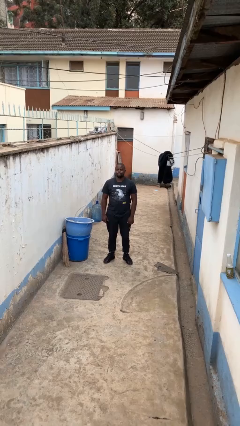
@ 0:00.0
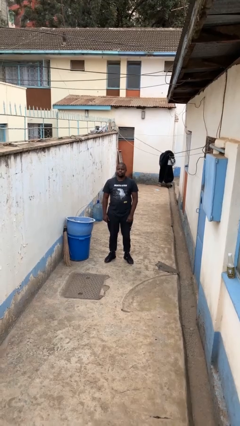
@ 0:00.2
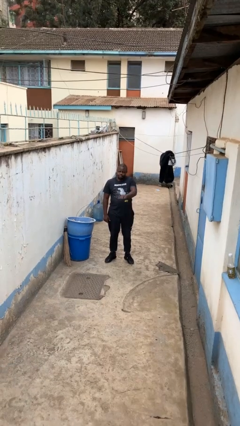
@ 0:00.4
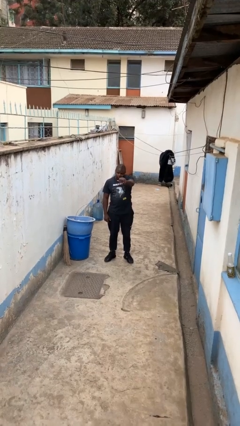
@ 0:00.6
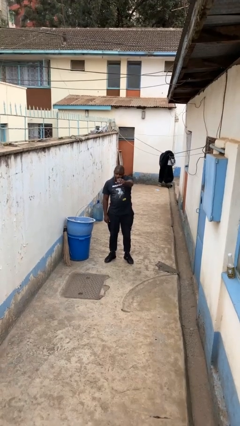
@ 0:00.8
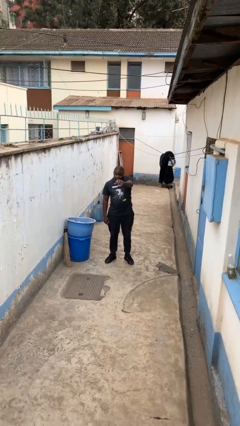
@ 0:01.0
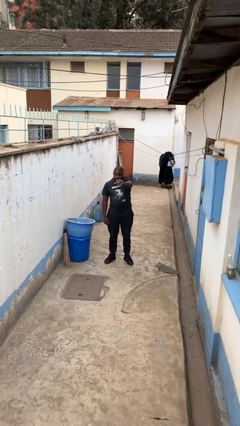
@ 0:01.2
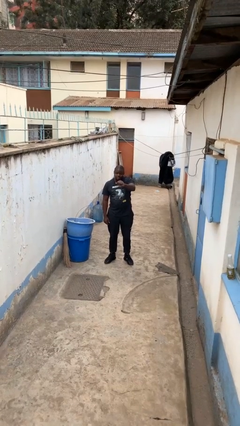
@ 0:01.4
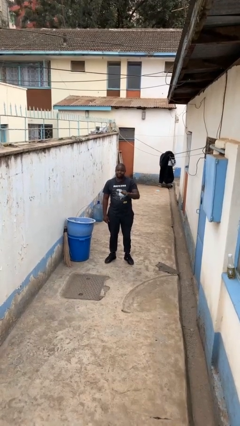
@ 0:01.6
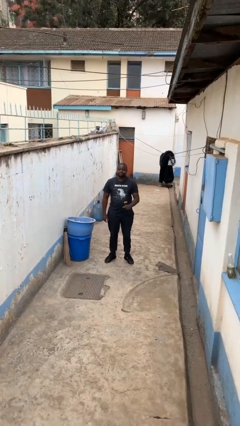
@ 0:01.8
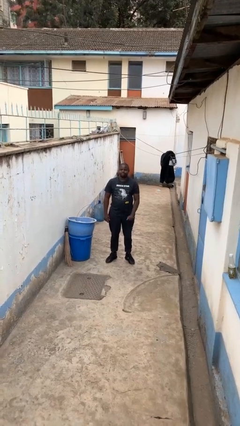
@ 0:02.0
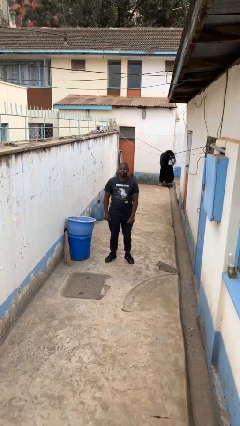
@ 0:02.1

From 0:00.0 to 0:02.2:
person gestures come here

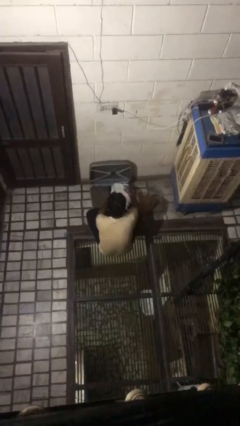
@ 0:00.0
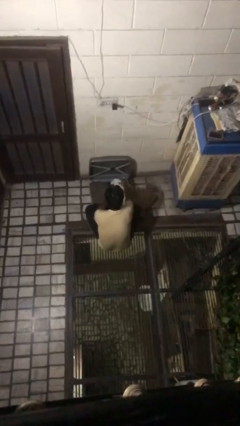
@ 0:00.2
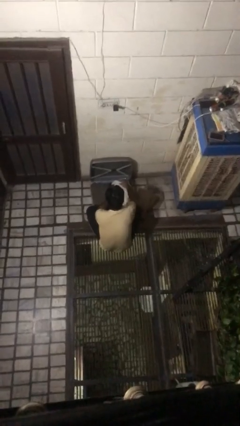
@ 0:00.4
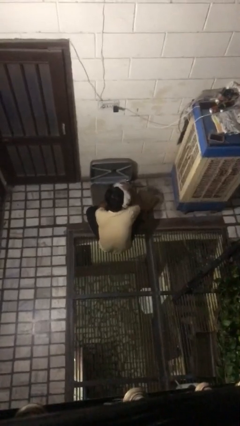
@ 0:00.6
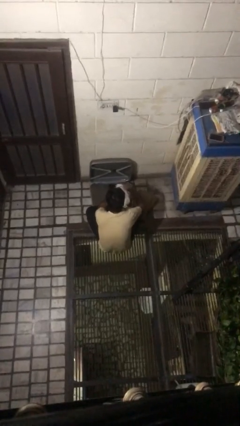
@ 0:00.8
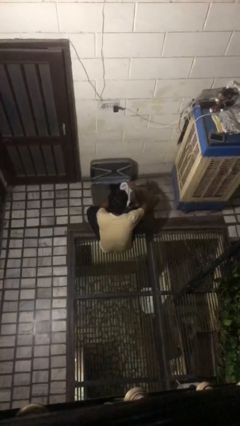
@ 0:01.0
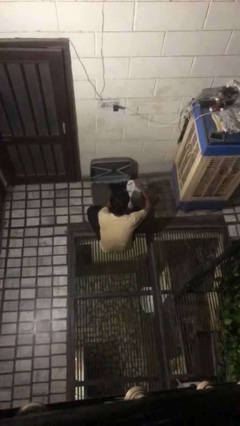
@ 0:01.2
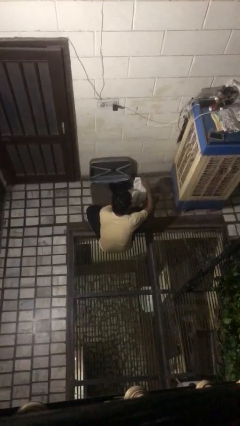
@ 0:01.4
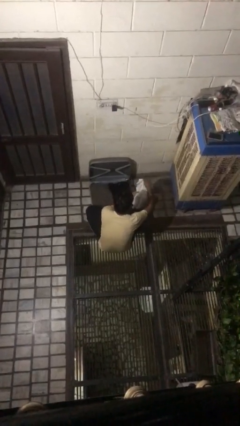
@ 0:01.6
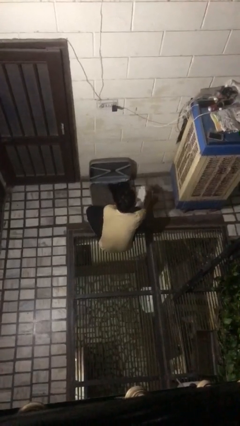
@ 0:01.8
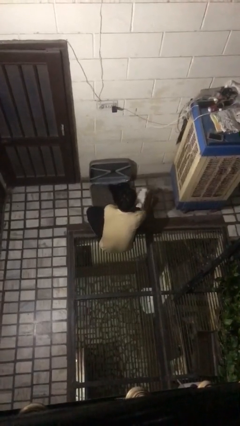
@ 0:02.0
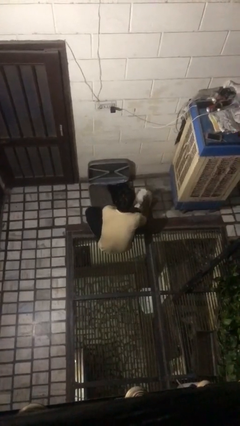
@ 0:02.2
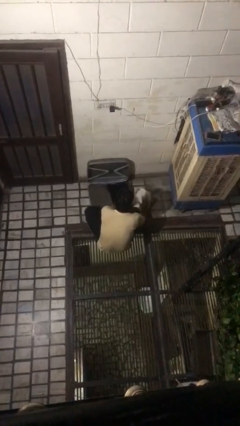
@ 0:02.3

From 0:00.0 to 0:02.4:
person unloads clothes from suitcase

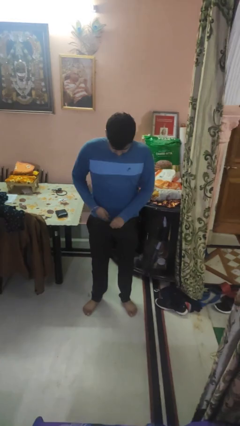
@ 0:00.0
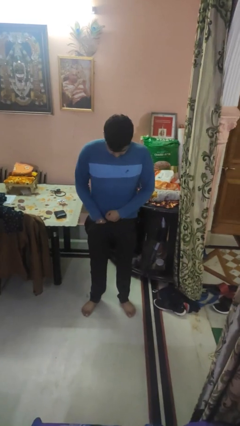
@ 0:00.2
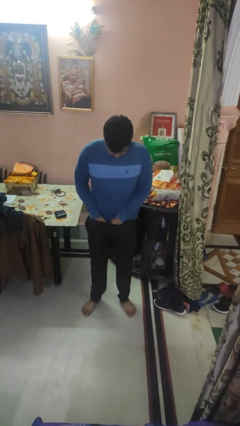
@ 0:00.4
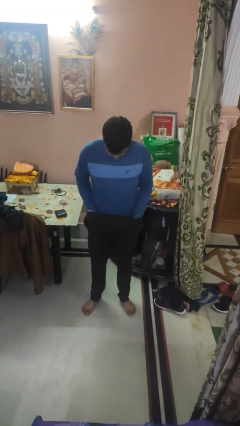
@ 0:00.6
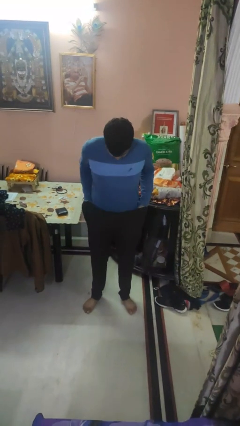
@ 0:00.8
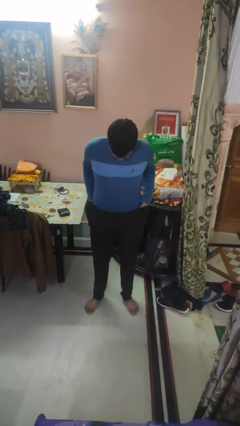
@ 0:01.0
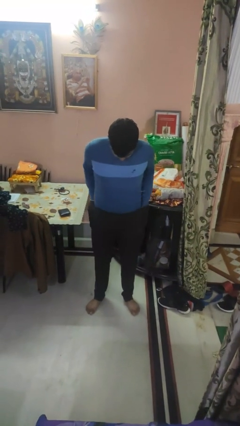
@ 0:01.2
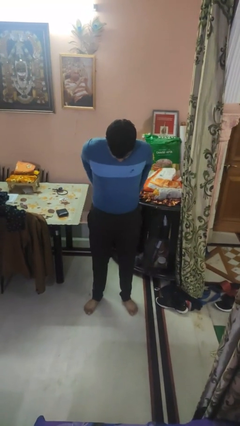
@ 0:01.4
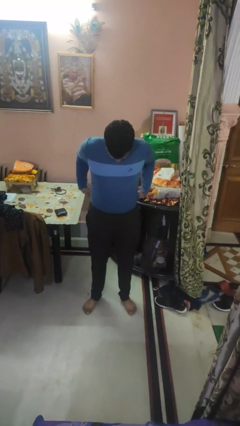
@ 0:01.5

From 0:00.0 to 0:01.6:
person tucks in shirt

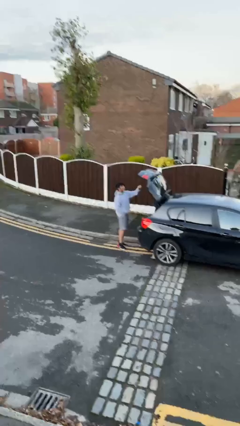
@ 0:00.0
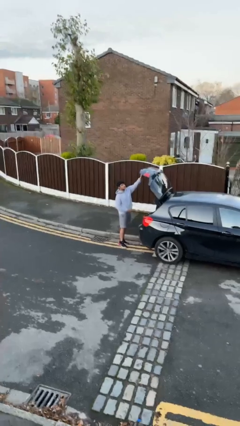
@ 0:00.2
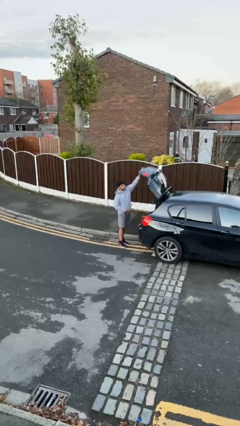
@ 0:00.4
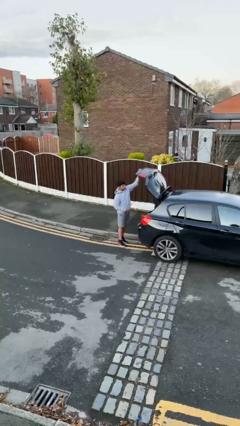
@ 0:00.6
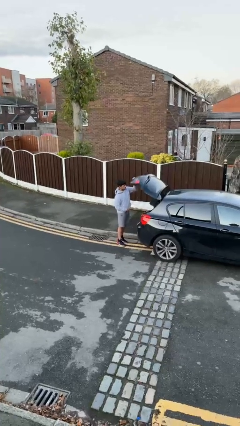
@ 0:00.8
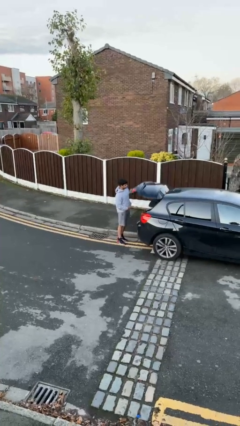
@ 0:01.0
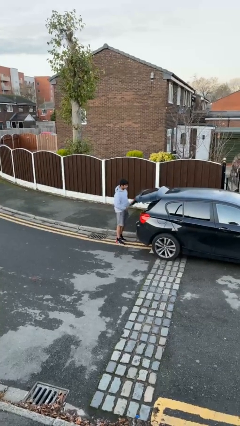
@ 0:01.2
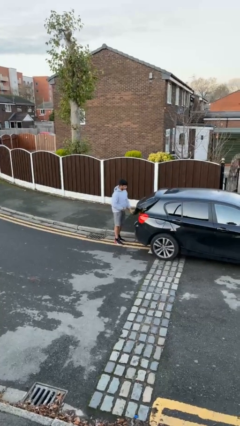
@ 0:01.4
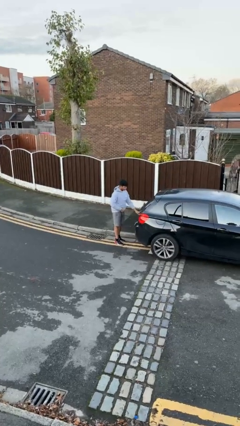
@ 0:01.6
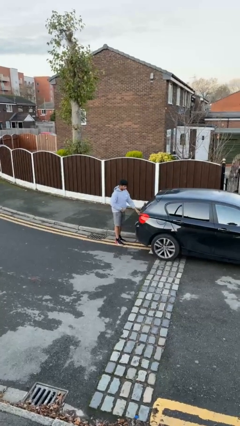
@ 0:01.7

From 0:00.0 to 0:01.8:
person closes car trunk

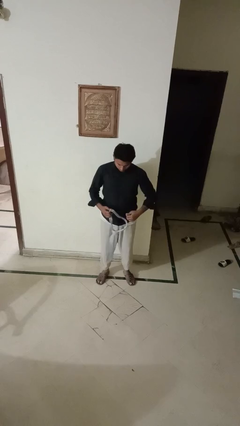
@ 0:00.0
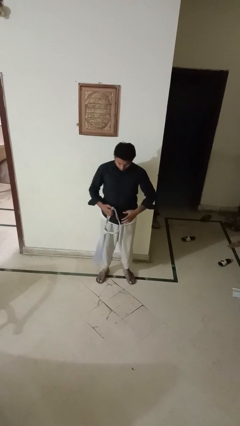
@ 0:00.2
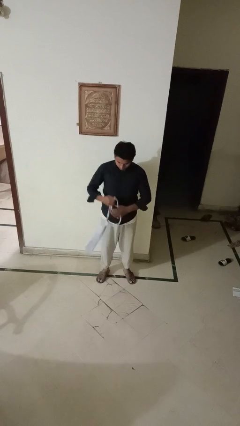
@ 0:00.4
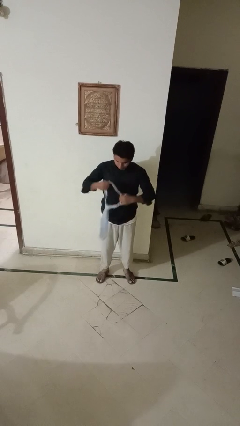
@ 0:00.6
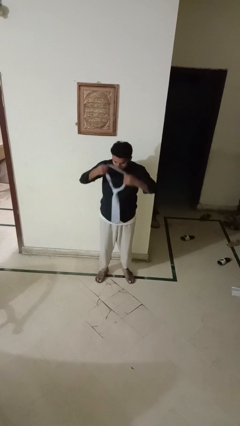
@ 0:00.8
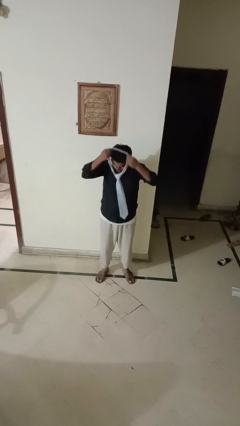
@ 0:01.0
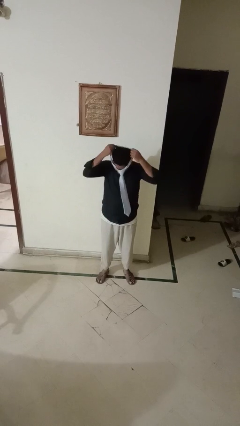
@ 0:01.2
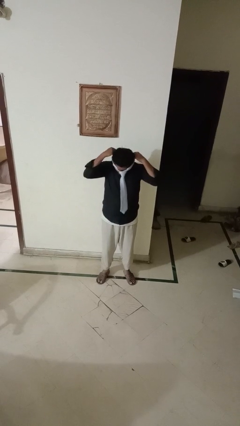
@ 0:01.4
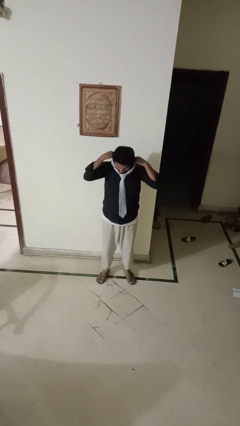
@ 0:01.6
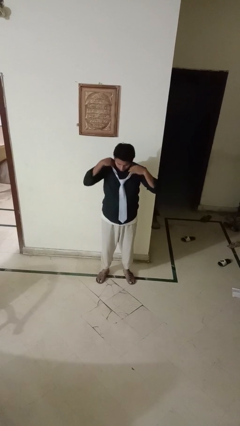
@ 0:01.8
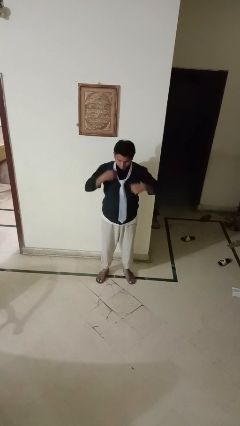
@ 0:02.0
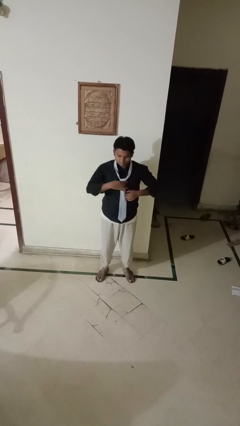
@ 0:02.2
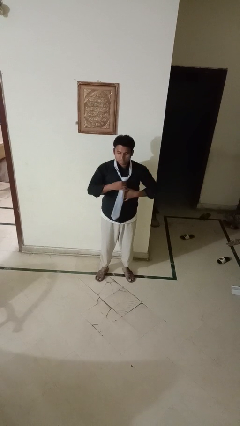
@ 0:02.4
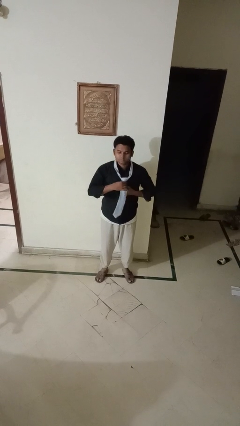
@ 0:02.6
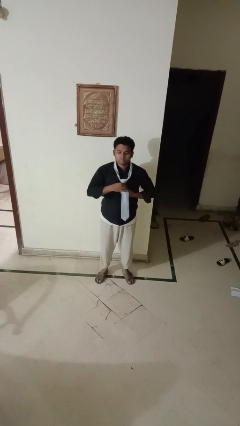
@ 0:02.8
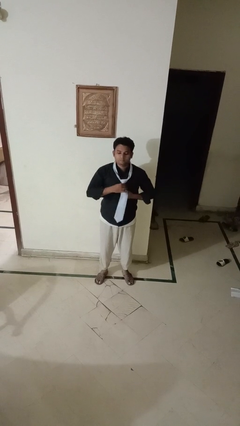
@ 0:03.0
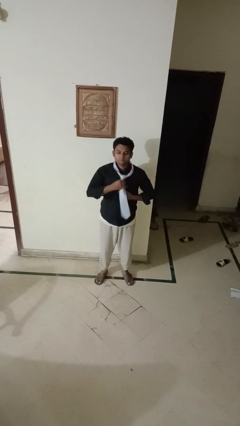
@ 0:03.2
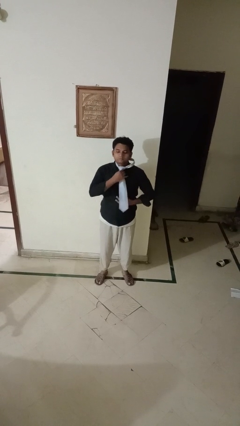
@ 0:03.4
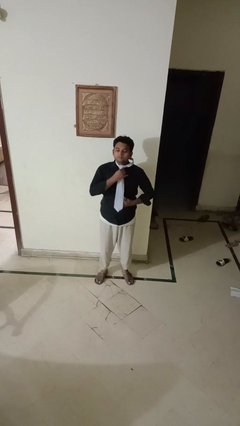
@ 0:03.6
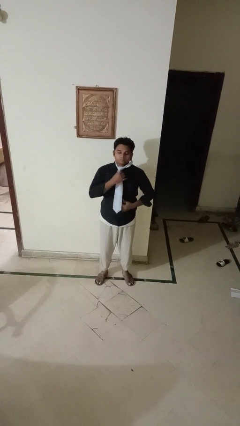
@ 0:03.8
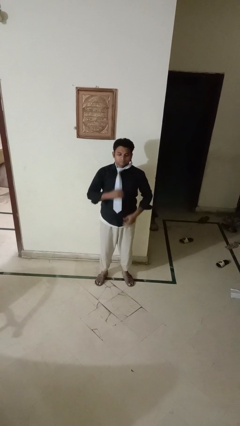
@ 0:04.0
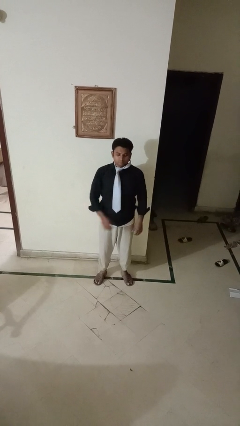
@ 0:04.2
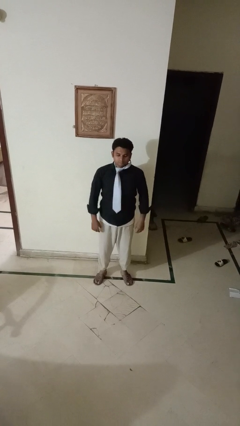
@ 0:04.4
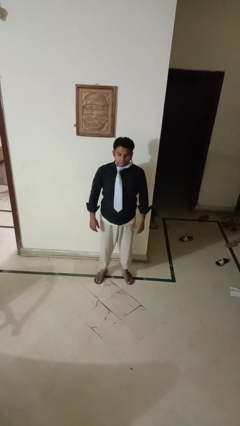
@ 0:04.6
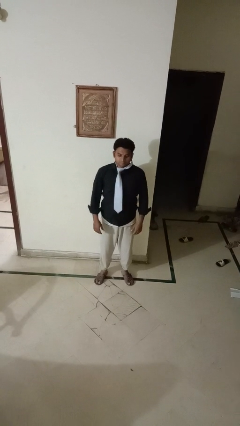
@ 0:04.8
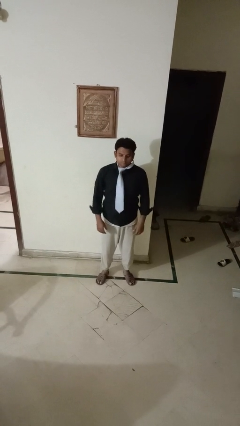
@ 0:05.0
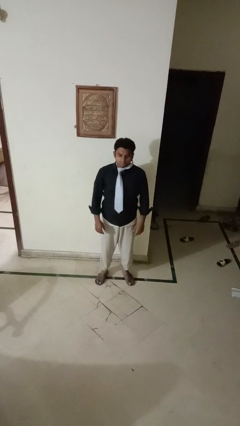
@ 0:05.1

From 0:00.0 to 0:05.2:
person puts on necktie

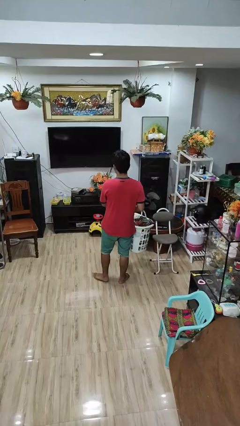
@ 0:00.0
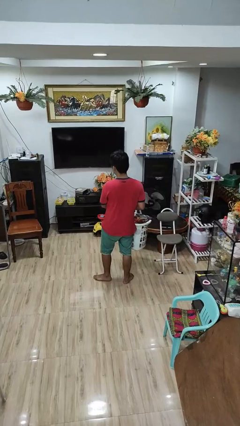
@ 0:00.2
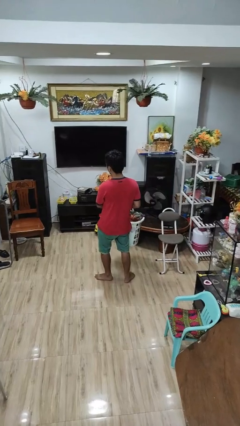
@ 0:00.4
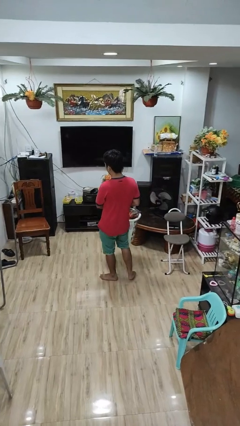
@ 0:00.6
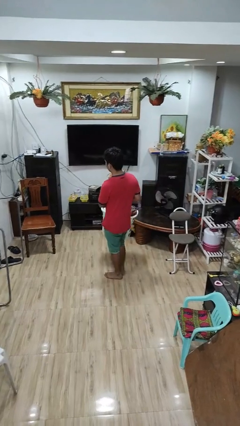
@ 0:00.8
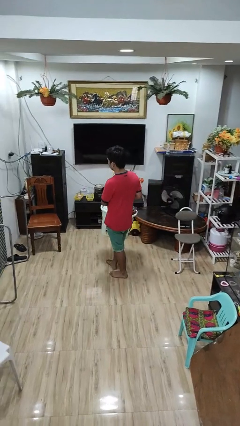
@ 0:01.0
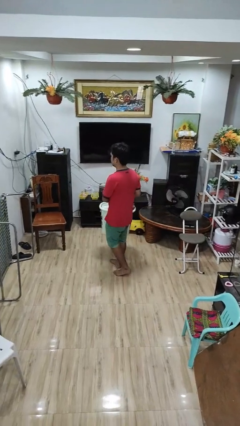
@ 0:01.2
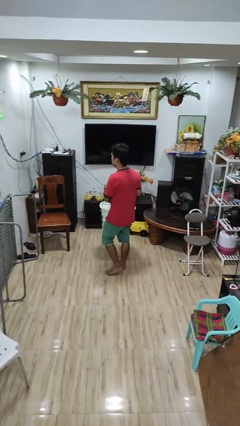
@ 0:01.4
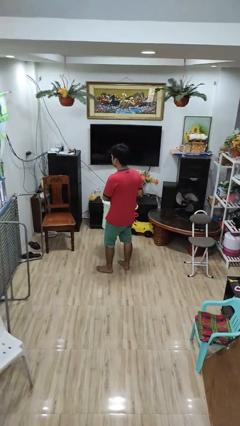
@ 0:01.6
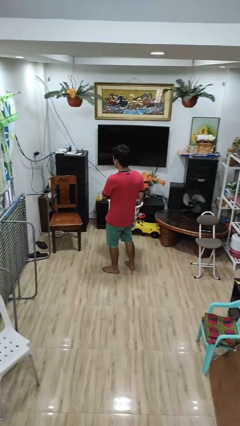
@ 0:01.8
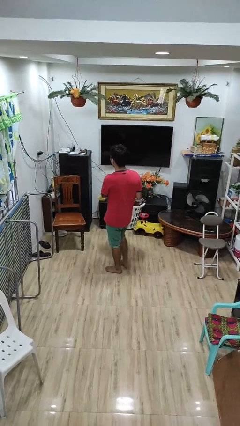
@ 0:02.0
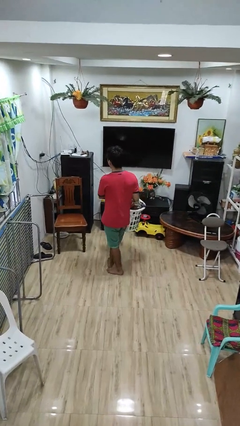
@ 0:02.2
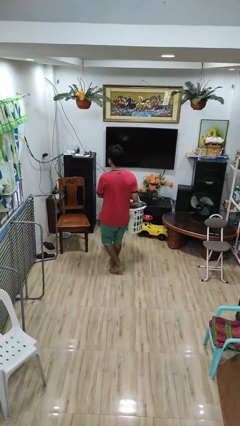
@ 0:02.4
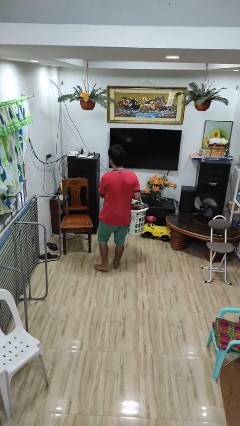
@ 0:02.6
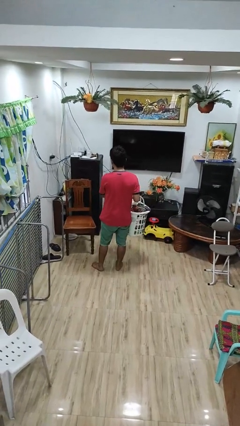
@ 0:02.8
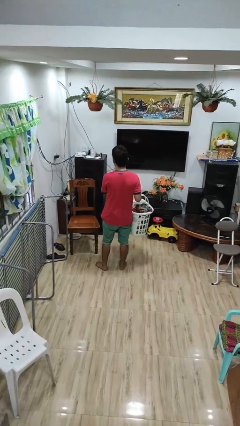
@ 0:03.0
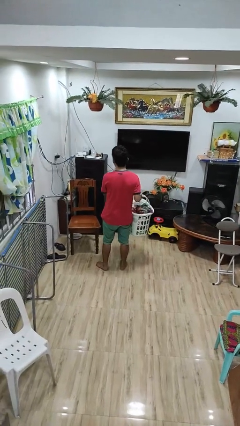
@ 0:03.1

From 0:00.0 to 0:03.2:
person carries laundry basket

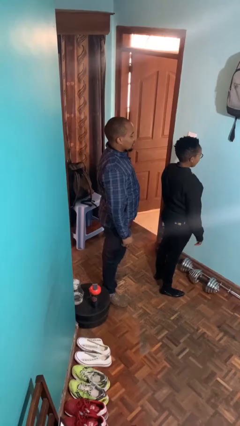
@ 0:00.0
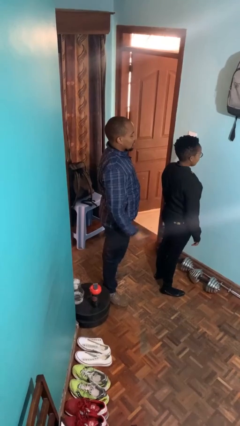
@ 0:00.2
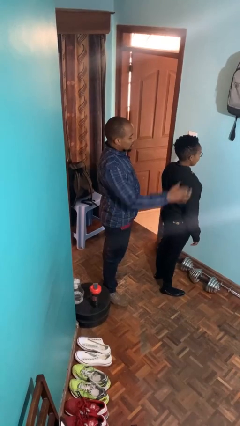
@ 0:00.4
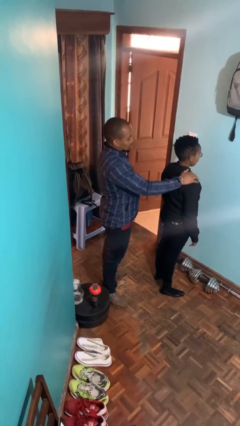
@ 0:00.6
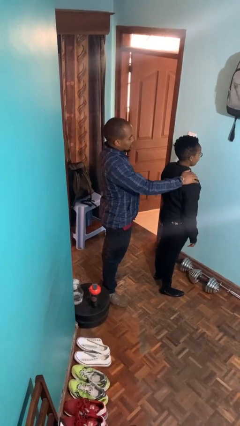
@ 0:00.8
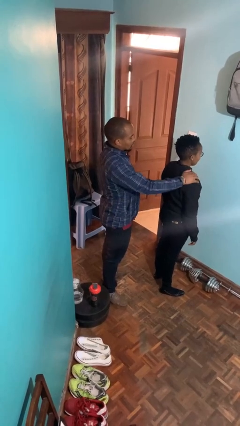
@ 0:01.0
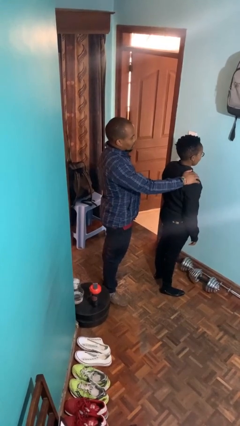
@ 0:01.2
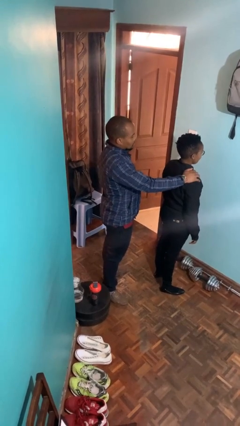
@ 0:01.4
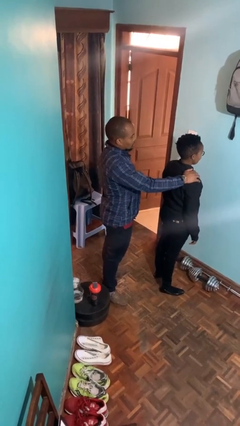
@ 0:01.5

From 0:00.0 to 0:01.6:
person grabs person by shoulder
